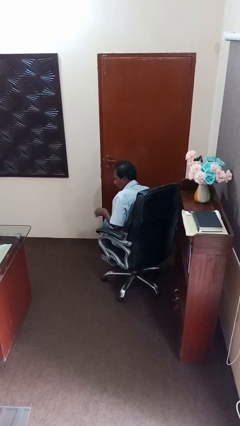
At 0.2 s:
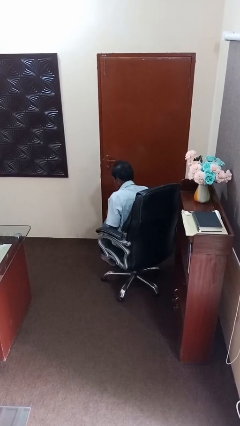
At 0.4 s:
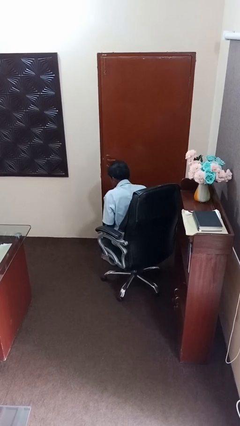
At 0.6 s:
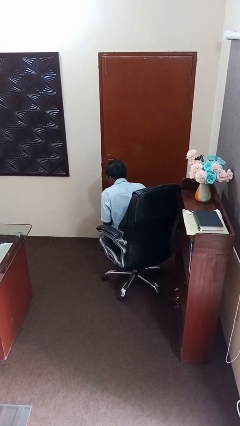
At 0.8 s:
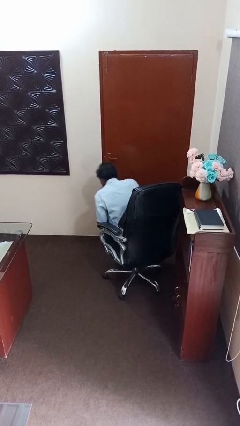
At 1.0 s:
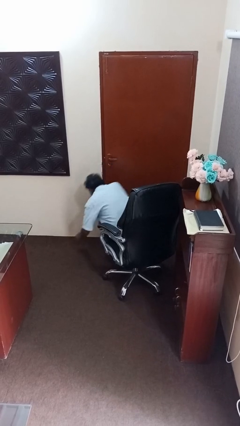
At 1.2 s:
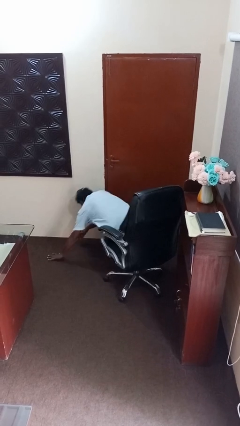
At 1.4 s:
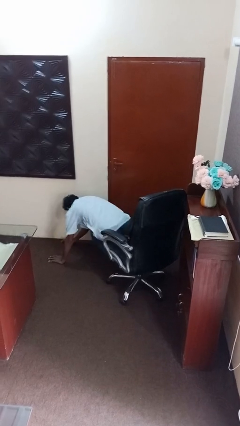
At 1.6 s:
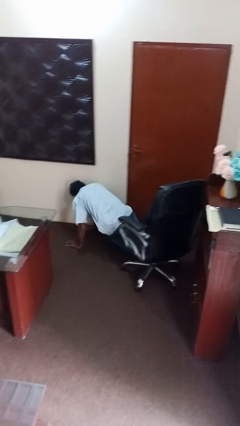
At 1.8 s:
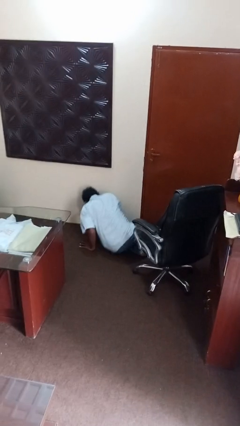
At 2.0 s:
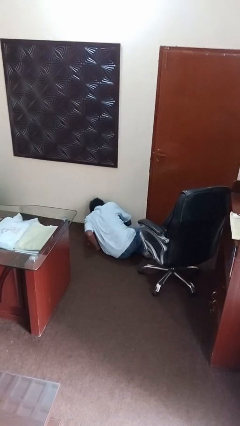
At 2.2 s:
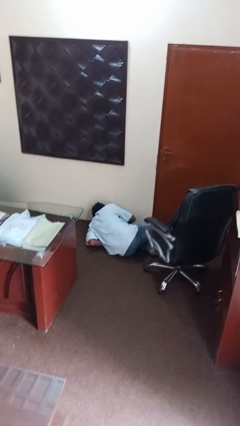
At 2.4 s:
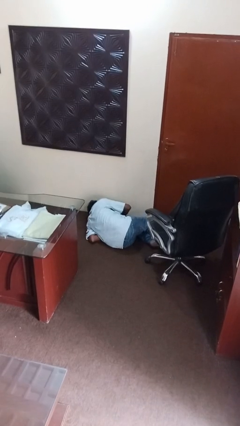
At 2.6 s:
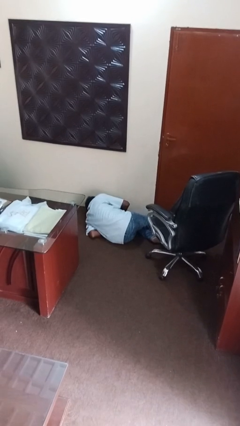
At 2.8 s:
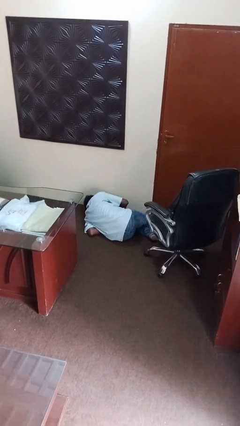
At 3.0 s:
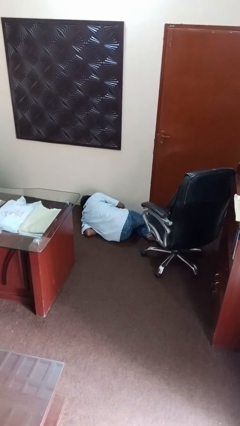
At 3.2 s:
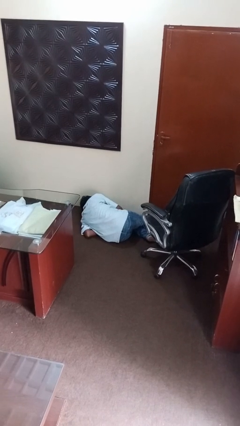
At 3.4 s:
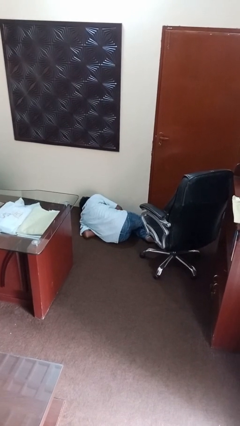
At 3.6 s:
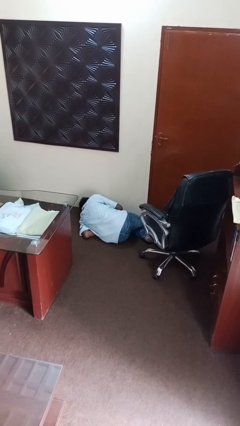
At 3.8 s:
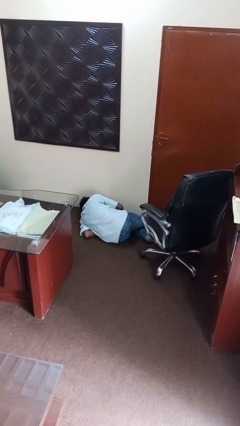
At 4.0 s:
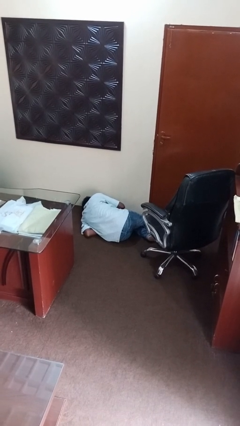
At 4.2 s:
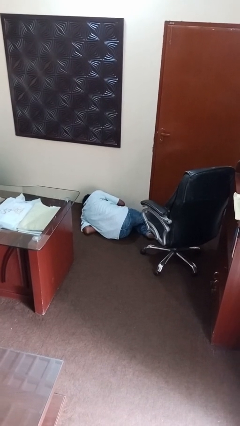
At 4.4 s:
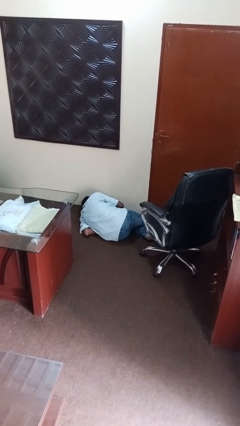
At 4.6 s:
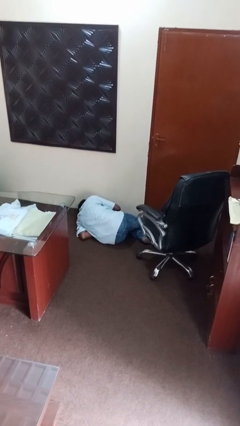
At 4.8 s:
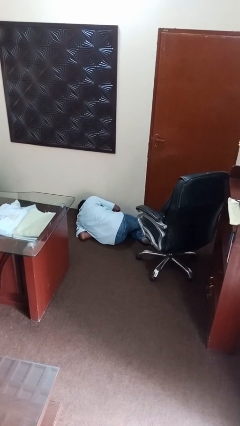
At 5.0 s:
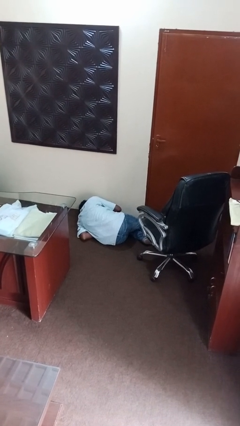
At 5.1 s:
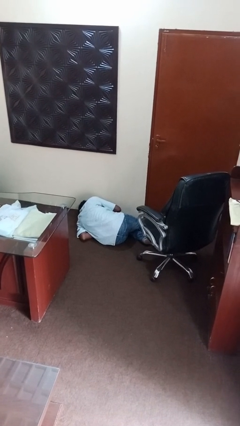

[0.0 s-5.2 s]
person falls from chair

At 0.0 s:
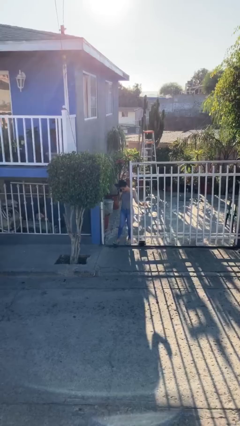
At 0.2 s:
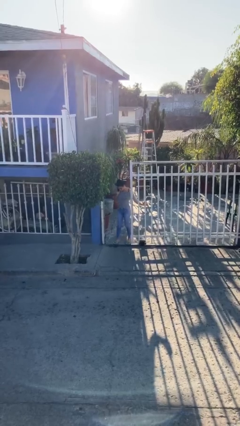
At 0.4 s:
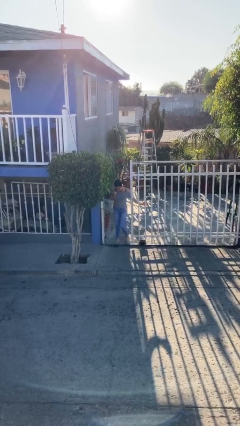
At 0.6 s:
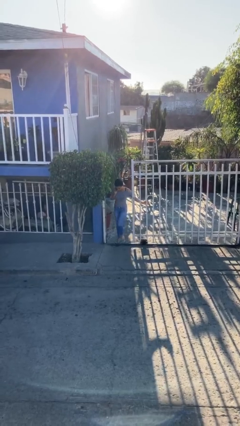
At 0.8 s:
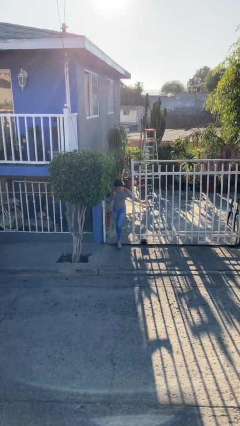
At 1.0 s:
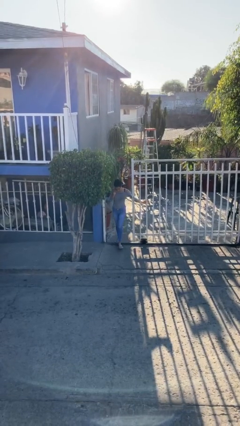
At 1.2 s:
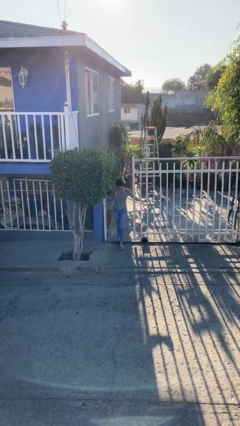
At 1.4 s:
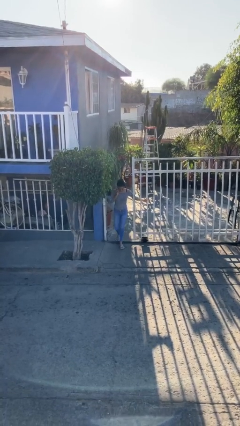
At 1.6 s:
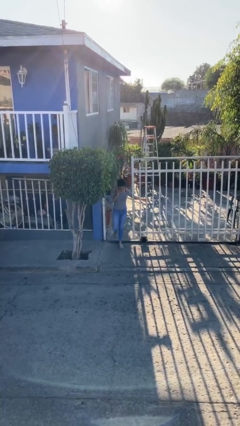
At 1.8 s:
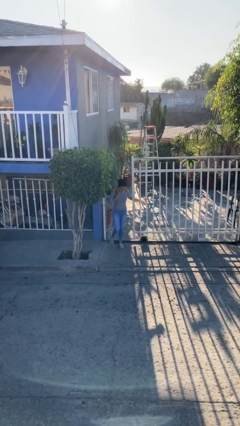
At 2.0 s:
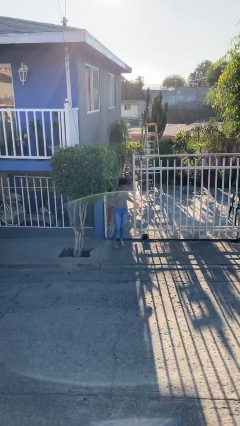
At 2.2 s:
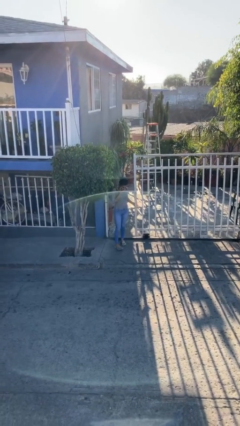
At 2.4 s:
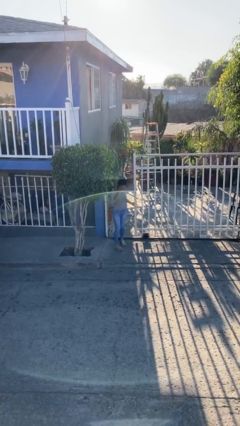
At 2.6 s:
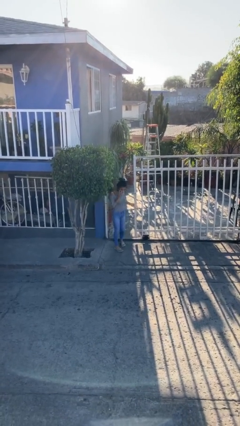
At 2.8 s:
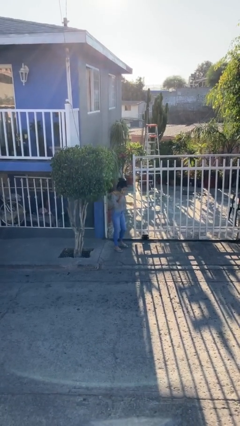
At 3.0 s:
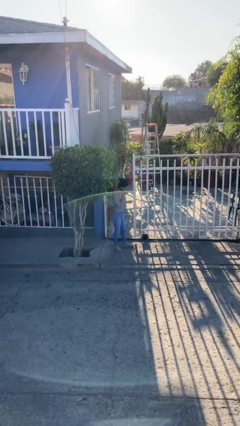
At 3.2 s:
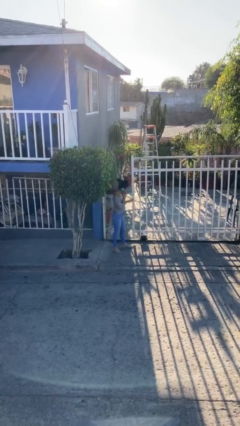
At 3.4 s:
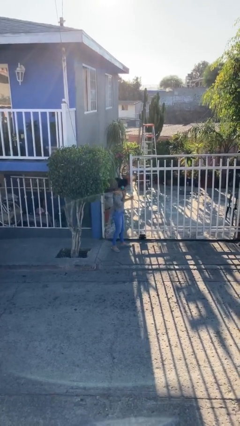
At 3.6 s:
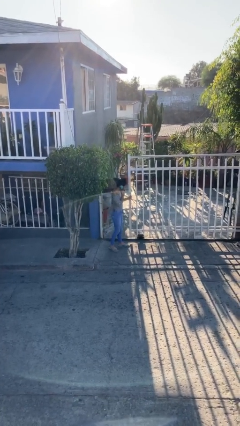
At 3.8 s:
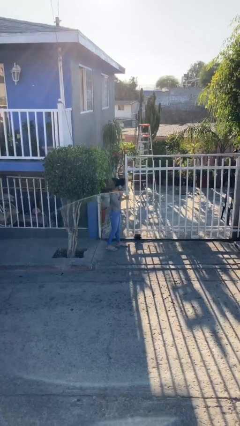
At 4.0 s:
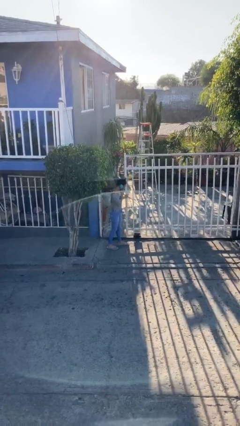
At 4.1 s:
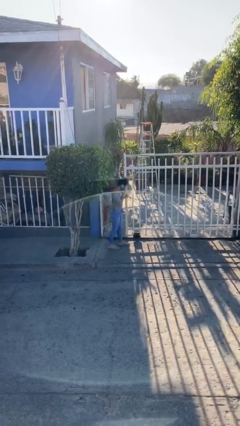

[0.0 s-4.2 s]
person enters scene through structure

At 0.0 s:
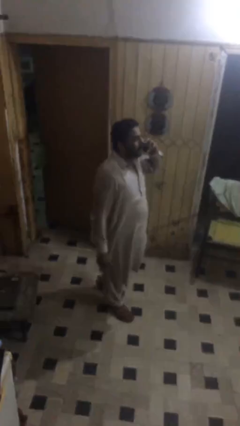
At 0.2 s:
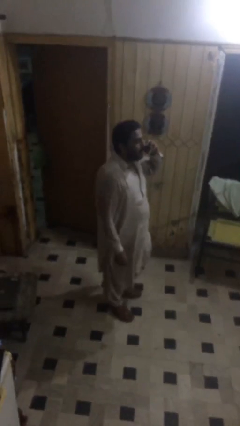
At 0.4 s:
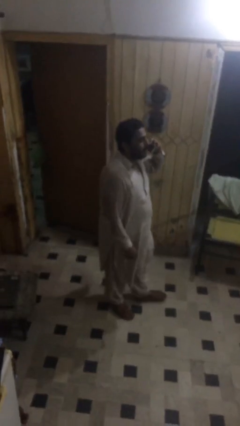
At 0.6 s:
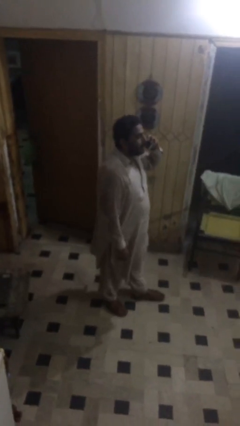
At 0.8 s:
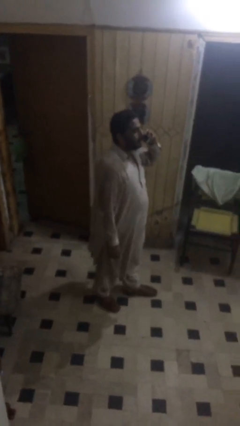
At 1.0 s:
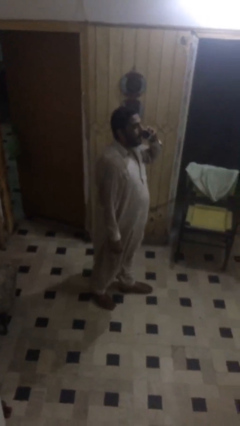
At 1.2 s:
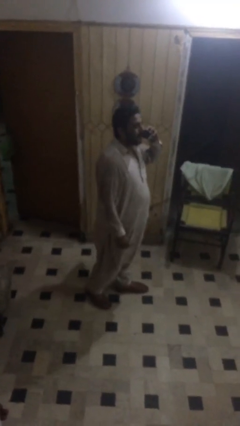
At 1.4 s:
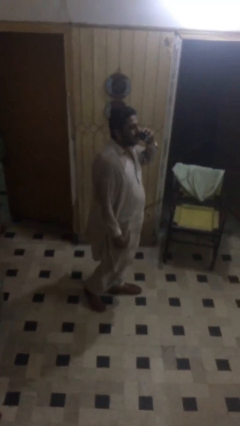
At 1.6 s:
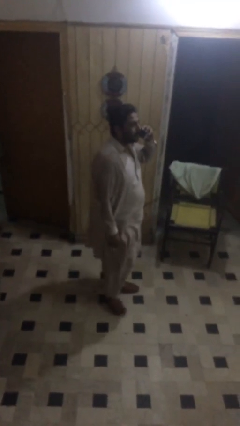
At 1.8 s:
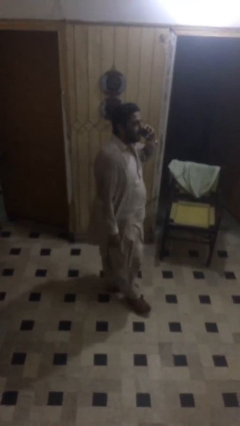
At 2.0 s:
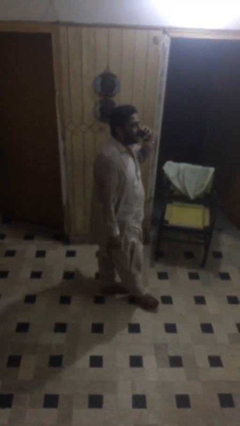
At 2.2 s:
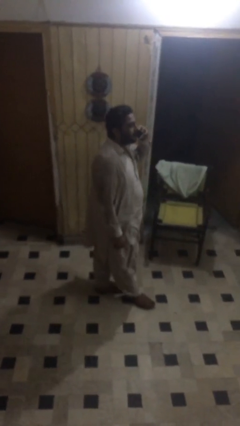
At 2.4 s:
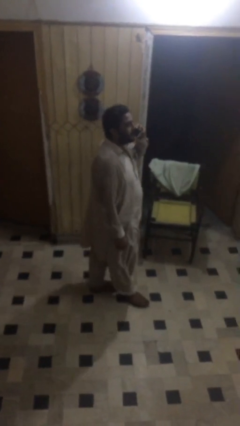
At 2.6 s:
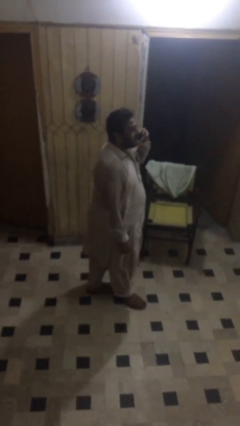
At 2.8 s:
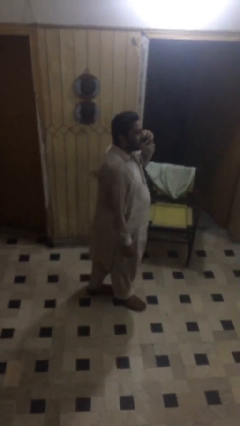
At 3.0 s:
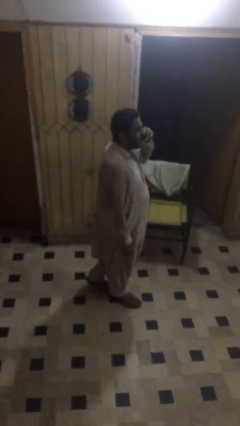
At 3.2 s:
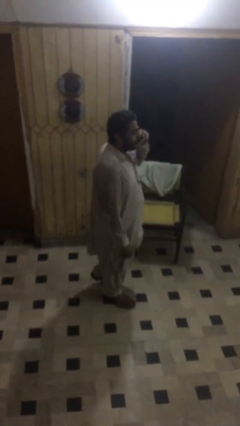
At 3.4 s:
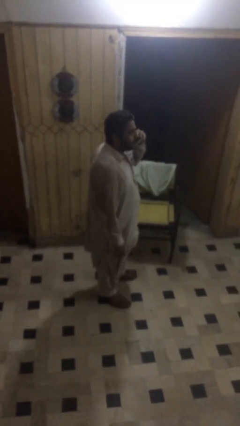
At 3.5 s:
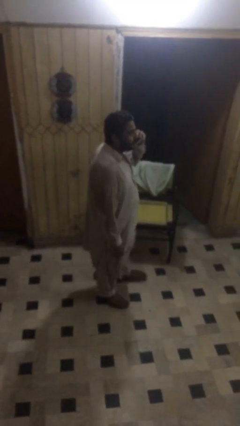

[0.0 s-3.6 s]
person talks on phone

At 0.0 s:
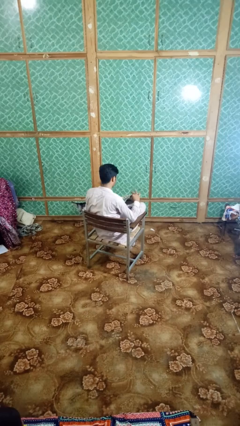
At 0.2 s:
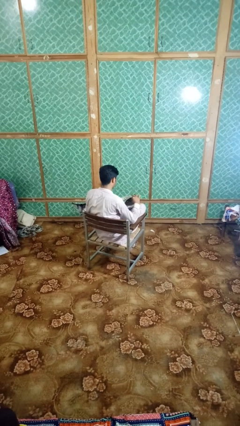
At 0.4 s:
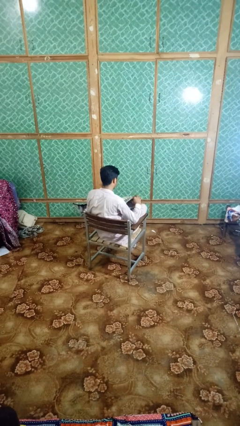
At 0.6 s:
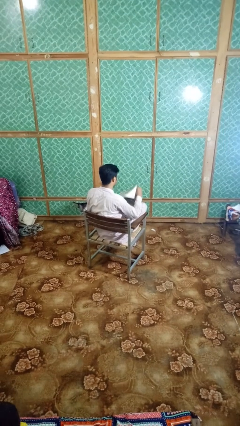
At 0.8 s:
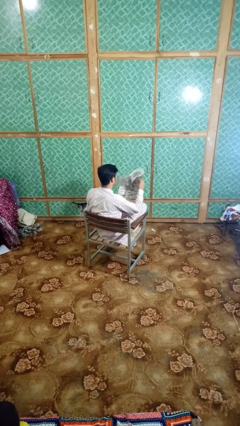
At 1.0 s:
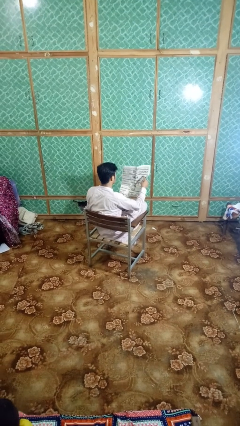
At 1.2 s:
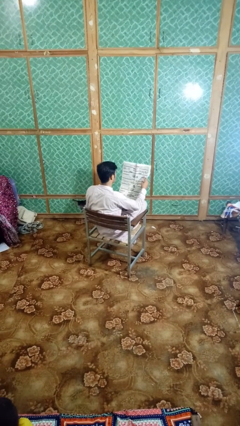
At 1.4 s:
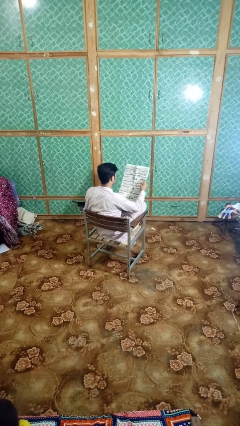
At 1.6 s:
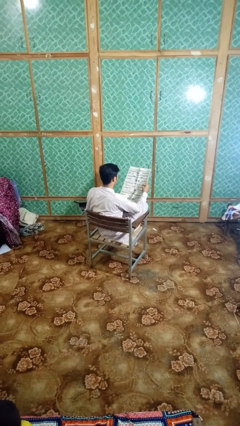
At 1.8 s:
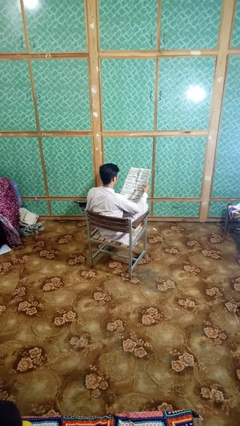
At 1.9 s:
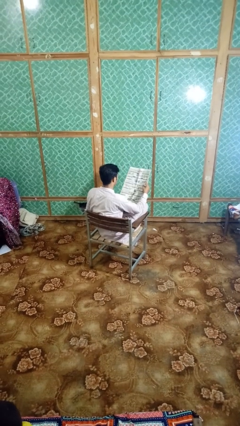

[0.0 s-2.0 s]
person reads newspaper

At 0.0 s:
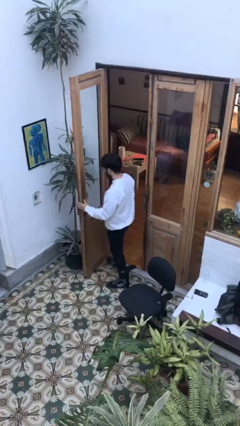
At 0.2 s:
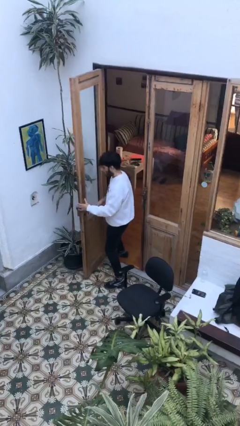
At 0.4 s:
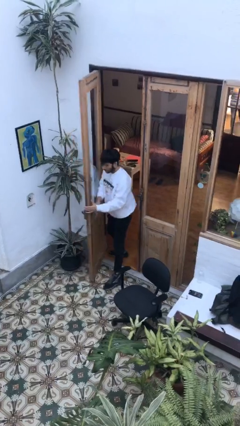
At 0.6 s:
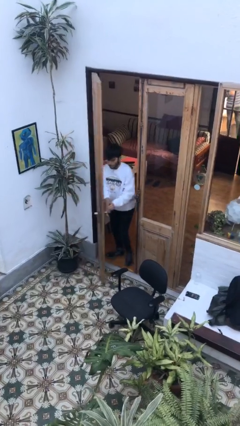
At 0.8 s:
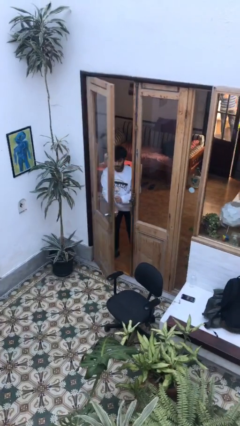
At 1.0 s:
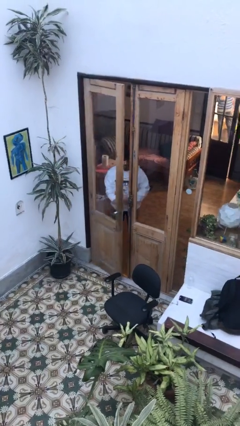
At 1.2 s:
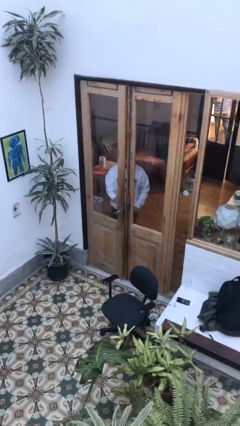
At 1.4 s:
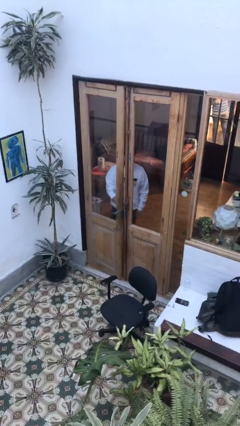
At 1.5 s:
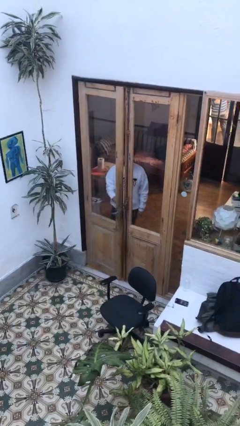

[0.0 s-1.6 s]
person closes facility door

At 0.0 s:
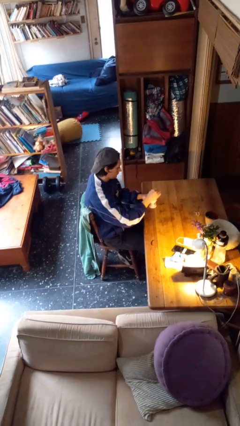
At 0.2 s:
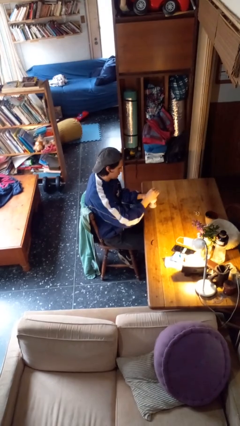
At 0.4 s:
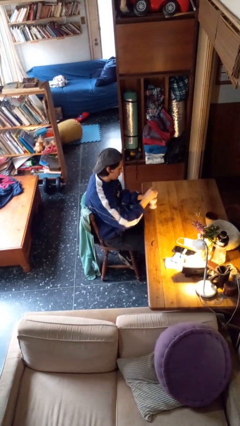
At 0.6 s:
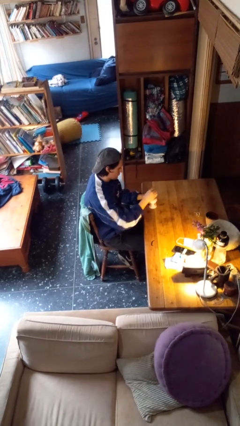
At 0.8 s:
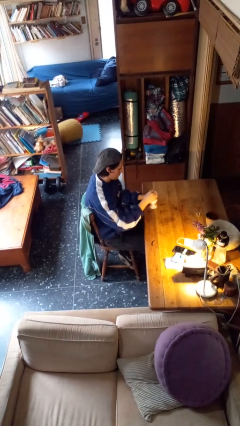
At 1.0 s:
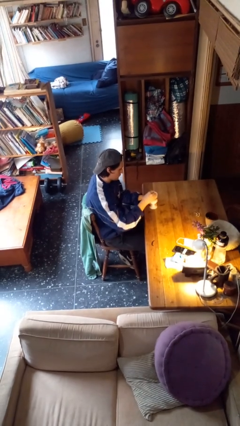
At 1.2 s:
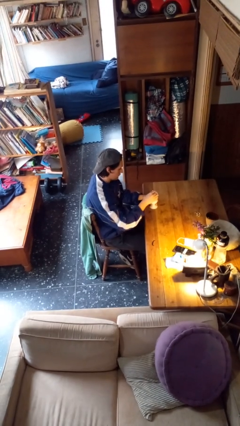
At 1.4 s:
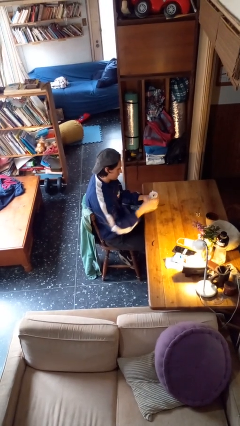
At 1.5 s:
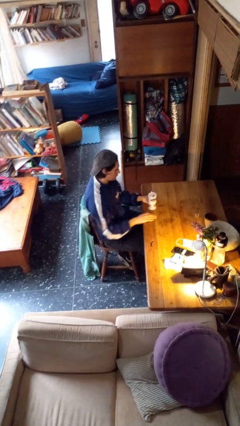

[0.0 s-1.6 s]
person stirs mug
